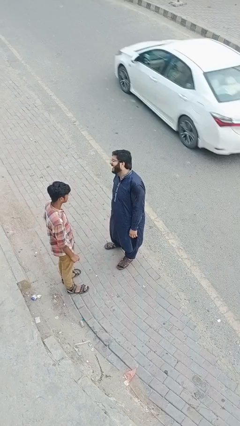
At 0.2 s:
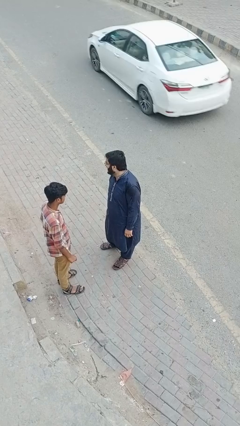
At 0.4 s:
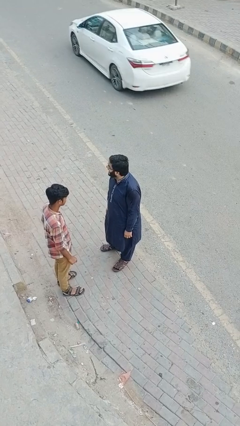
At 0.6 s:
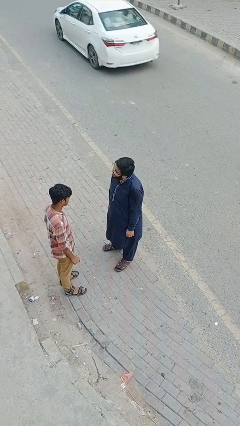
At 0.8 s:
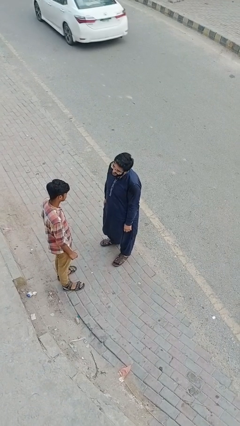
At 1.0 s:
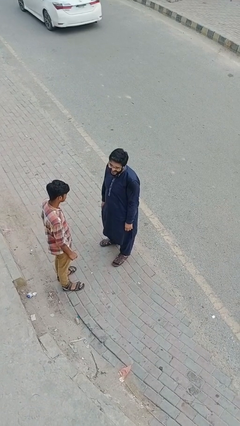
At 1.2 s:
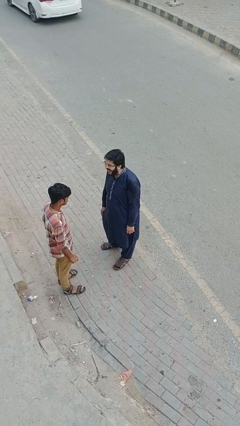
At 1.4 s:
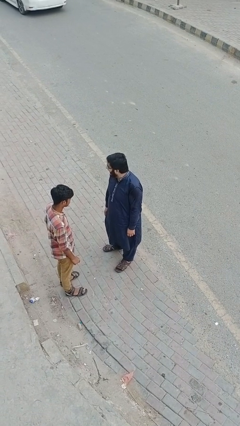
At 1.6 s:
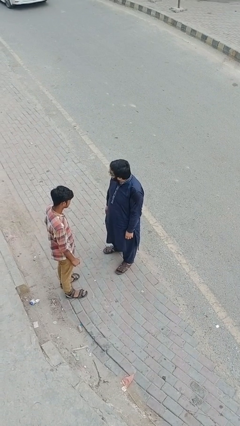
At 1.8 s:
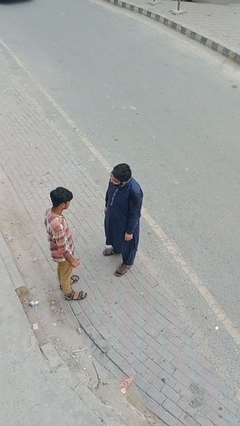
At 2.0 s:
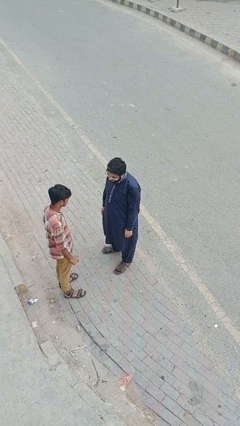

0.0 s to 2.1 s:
person laughs with person

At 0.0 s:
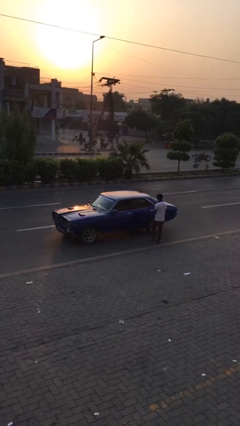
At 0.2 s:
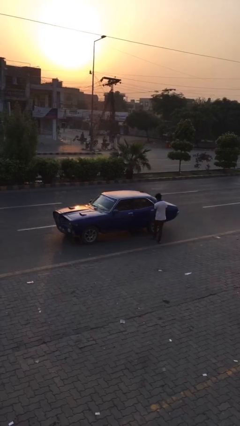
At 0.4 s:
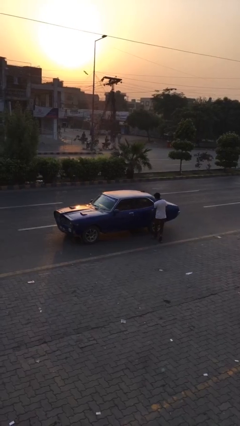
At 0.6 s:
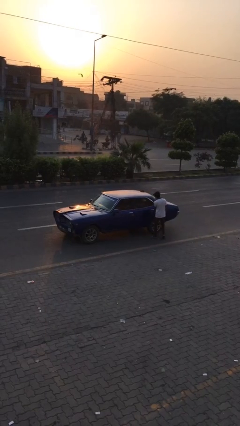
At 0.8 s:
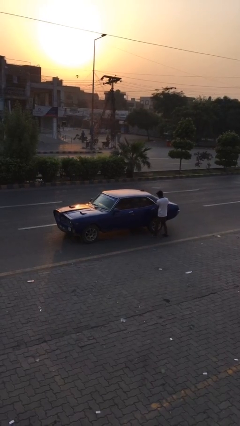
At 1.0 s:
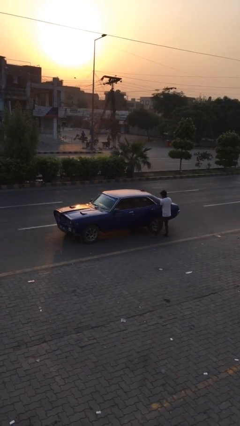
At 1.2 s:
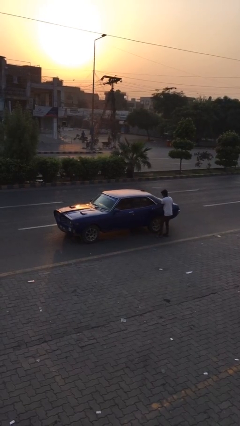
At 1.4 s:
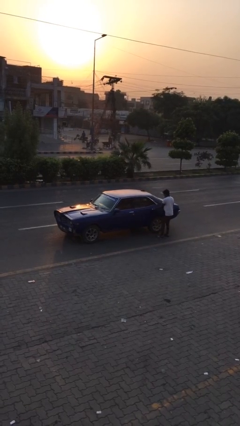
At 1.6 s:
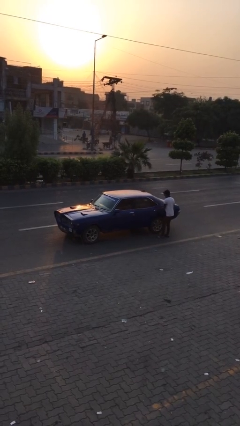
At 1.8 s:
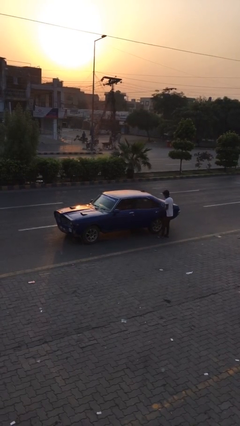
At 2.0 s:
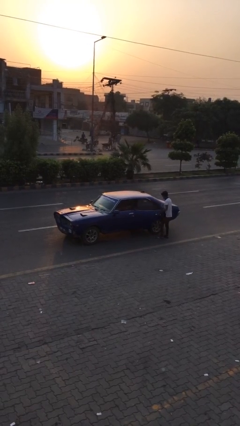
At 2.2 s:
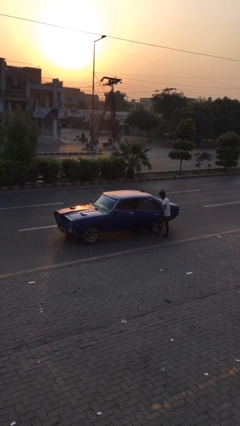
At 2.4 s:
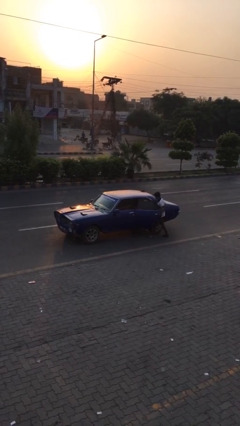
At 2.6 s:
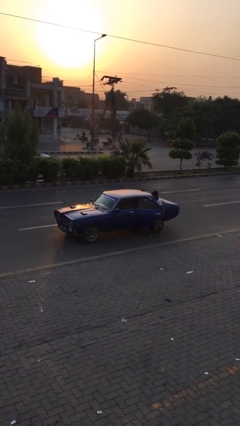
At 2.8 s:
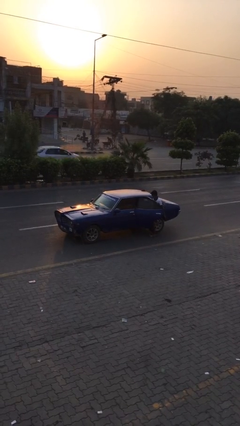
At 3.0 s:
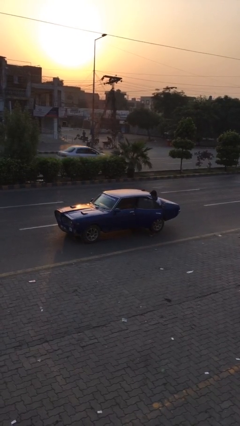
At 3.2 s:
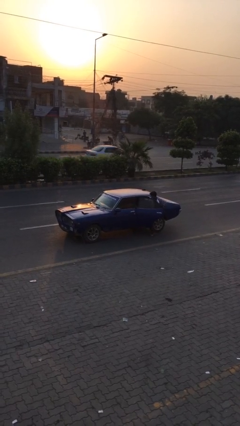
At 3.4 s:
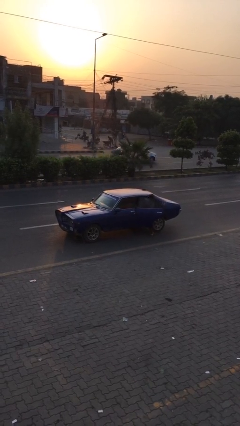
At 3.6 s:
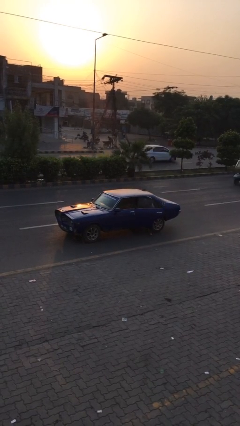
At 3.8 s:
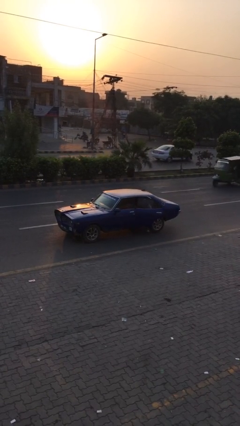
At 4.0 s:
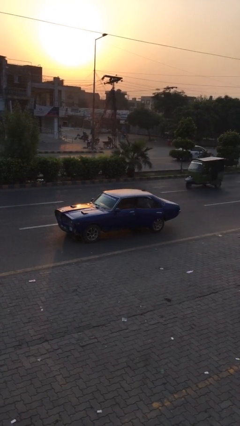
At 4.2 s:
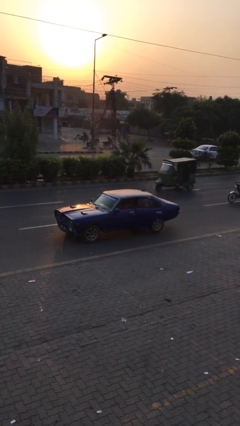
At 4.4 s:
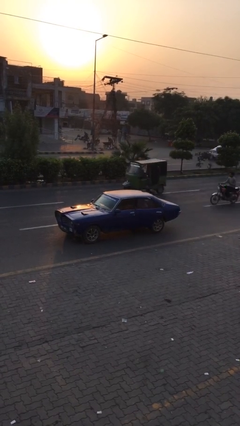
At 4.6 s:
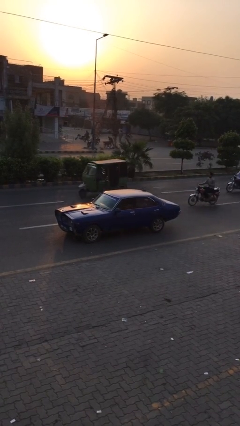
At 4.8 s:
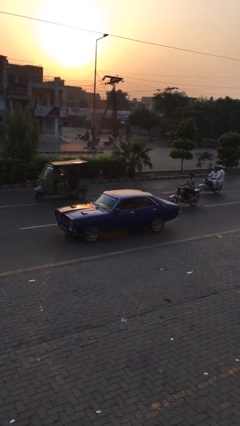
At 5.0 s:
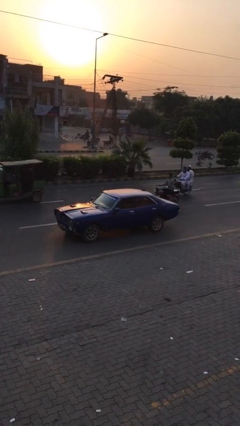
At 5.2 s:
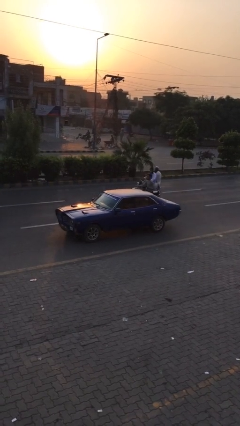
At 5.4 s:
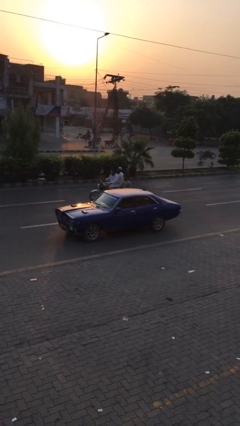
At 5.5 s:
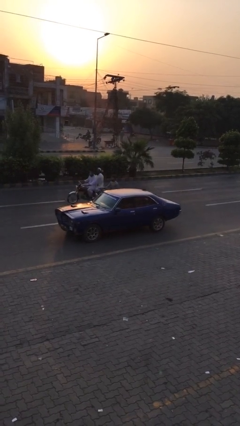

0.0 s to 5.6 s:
car picks up person

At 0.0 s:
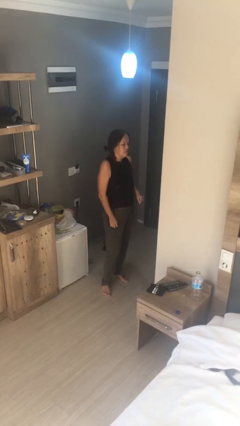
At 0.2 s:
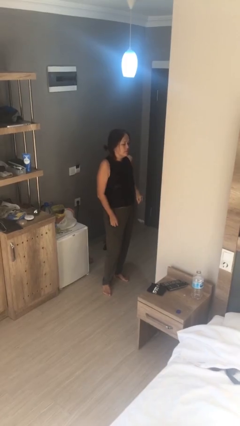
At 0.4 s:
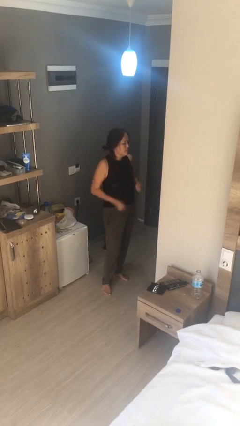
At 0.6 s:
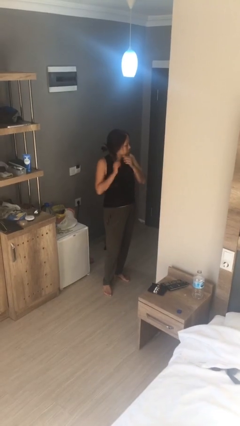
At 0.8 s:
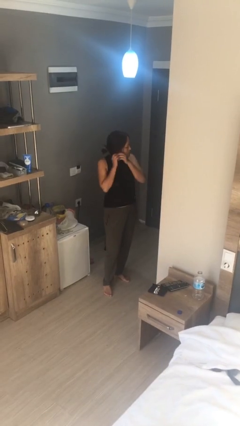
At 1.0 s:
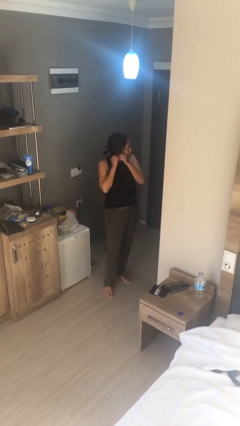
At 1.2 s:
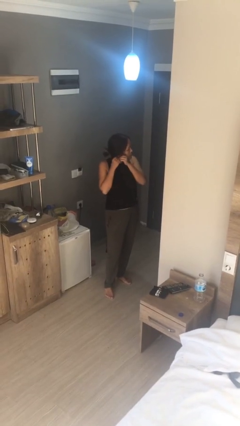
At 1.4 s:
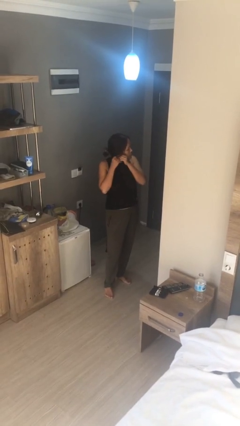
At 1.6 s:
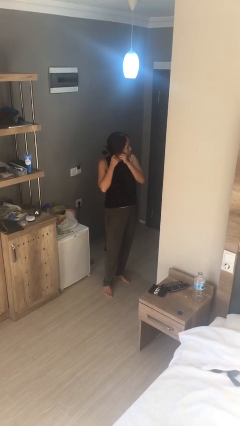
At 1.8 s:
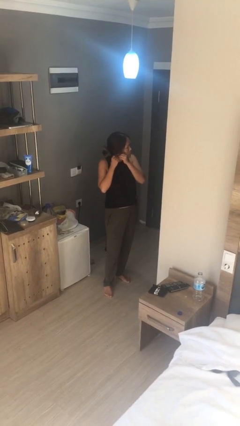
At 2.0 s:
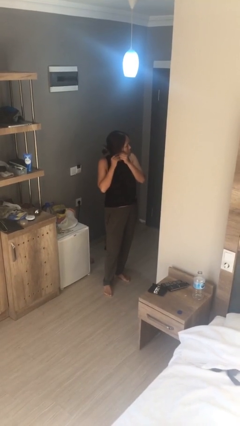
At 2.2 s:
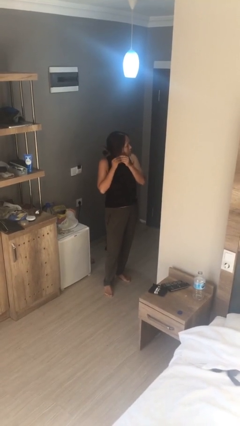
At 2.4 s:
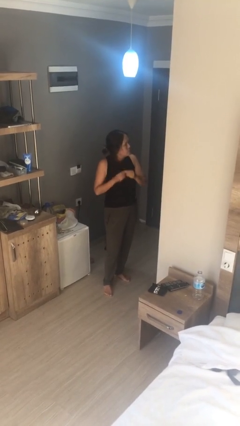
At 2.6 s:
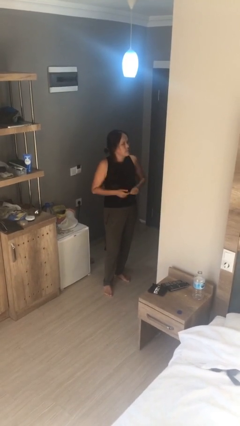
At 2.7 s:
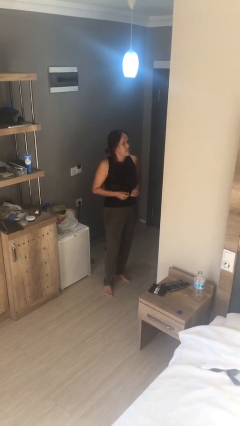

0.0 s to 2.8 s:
person takes off earrings

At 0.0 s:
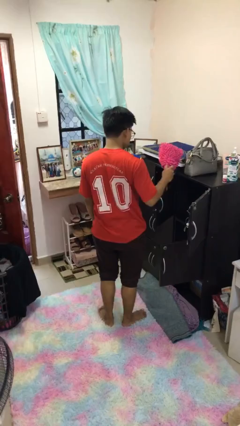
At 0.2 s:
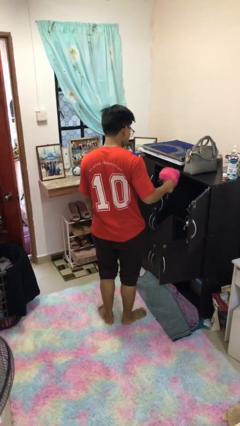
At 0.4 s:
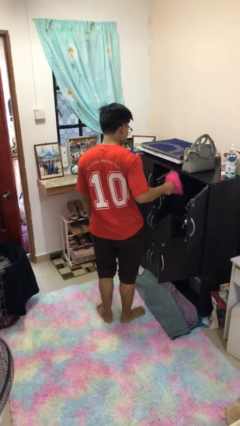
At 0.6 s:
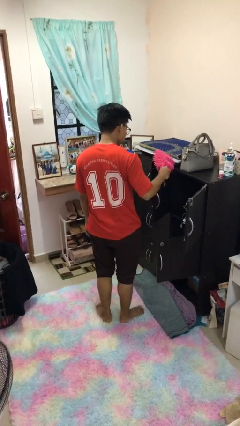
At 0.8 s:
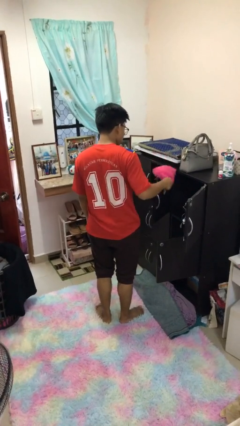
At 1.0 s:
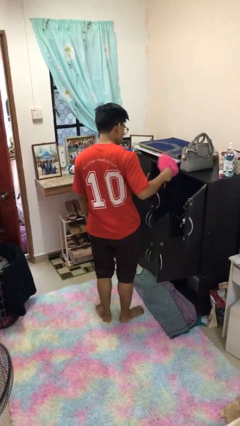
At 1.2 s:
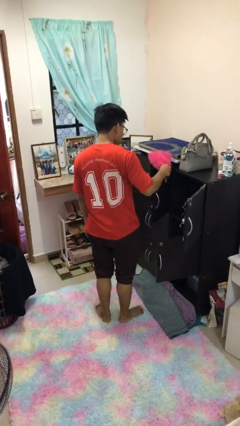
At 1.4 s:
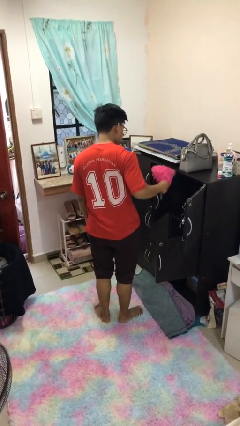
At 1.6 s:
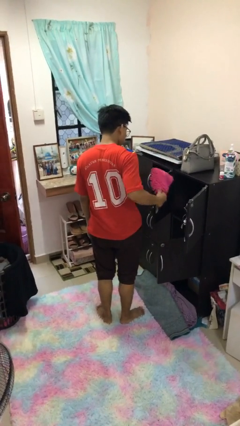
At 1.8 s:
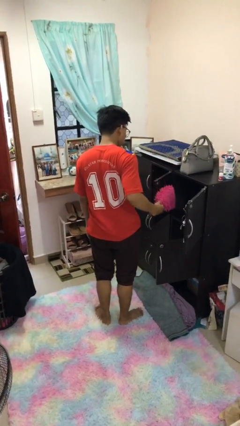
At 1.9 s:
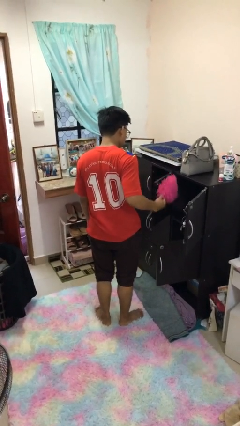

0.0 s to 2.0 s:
person dusts furniture

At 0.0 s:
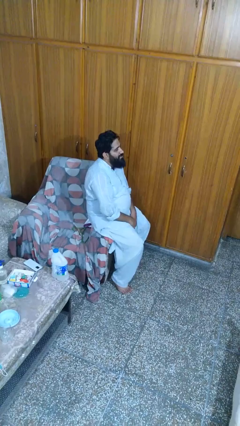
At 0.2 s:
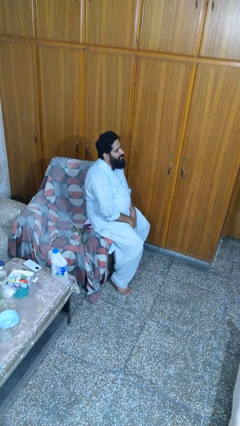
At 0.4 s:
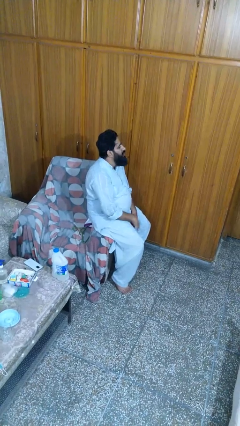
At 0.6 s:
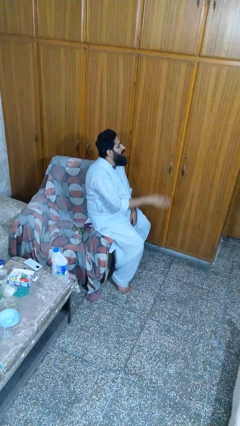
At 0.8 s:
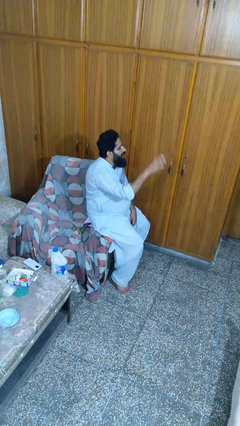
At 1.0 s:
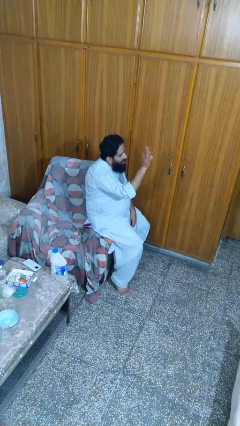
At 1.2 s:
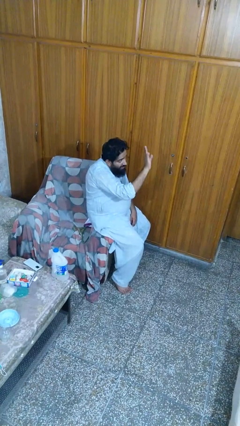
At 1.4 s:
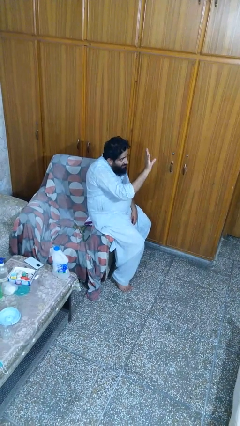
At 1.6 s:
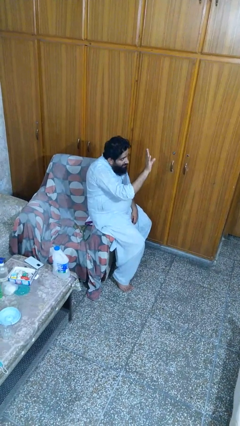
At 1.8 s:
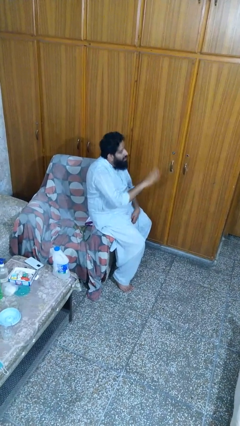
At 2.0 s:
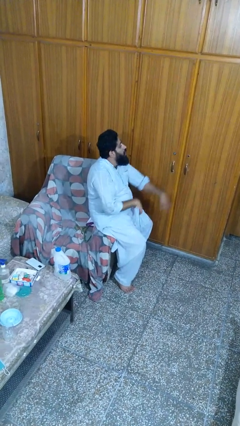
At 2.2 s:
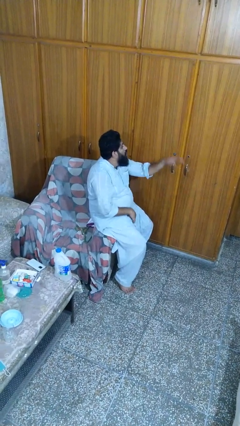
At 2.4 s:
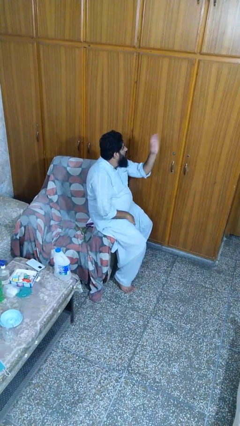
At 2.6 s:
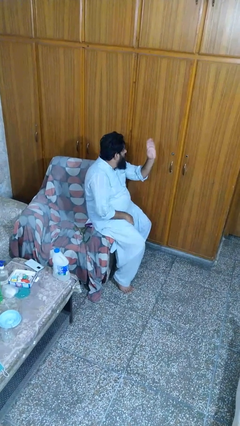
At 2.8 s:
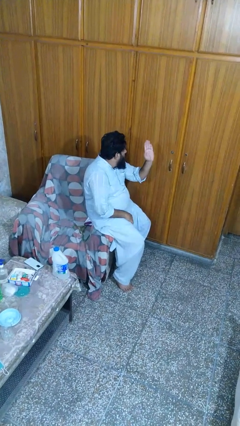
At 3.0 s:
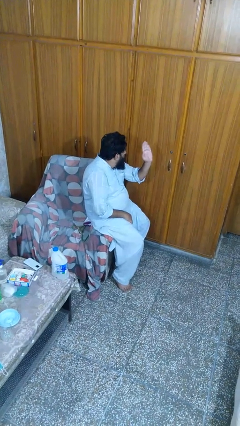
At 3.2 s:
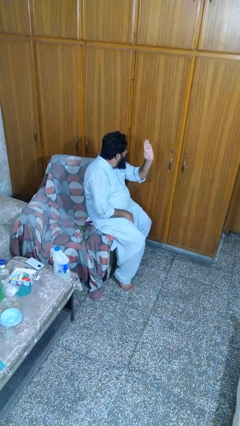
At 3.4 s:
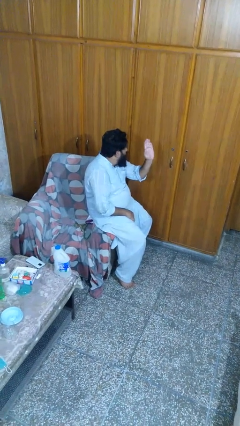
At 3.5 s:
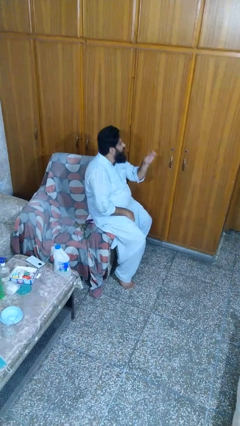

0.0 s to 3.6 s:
person waves at person

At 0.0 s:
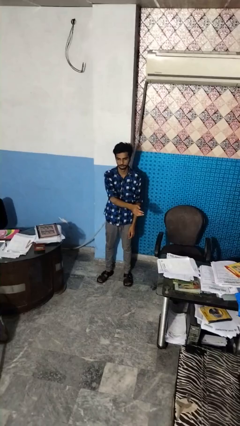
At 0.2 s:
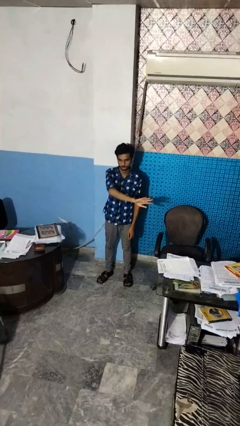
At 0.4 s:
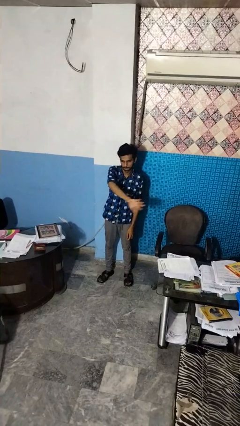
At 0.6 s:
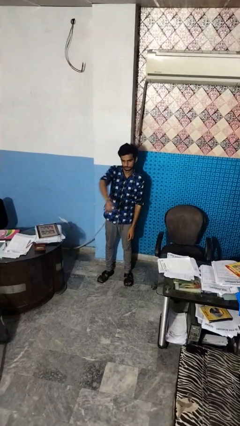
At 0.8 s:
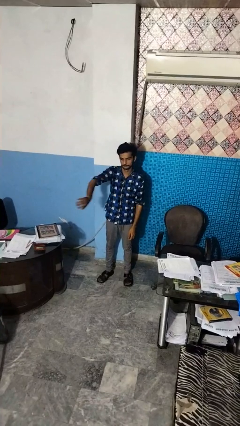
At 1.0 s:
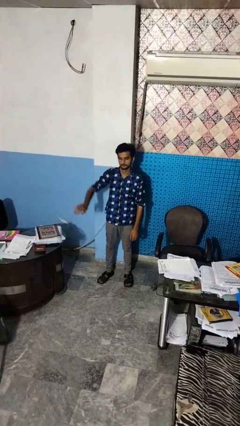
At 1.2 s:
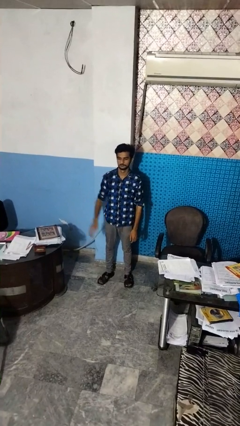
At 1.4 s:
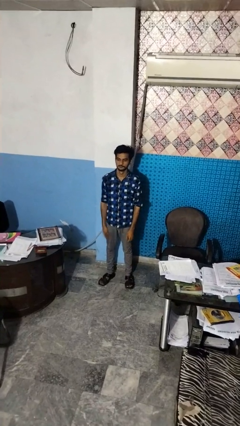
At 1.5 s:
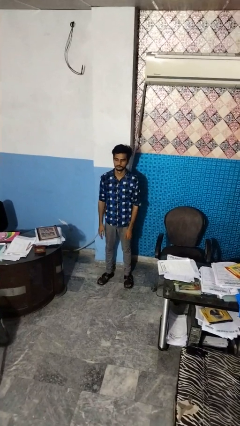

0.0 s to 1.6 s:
person gestures swipe right
